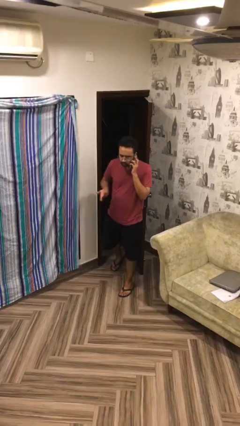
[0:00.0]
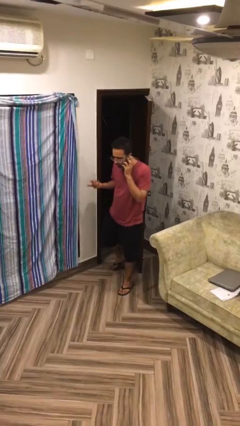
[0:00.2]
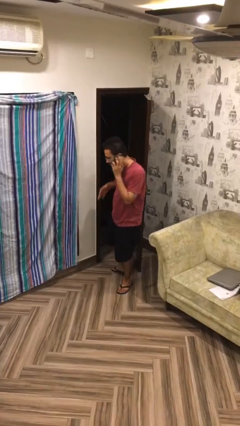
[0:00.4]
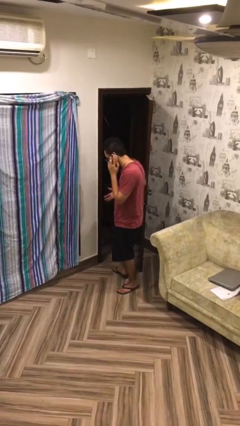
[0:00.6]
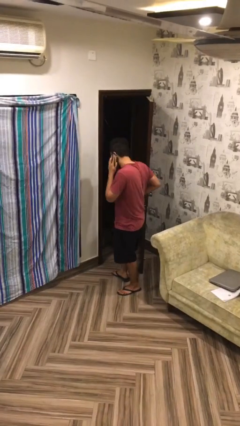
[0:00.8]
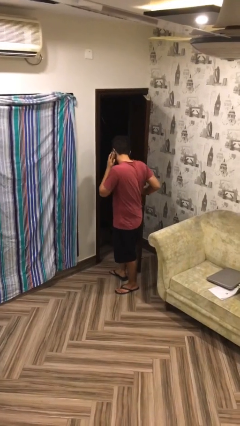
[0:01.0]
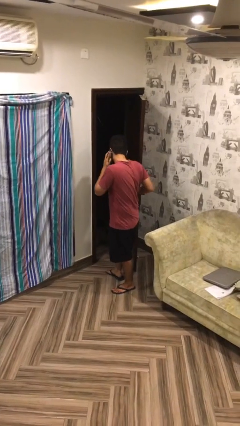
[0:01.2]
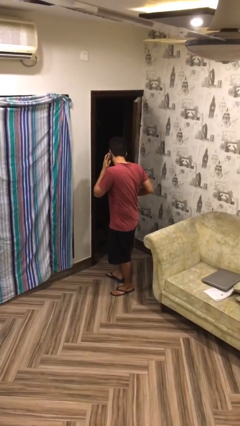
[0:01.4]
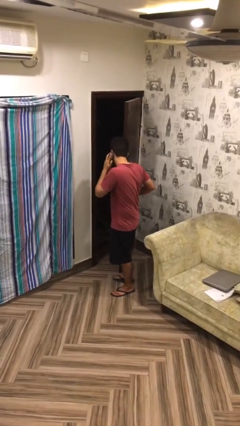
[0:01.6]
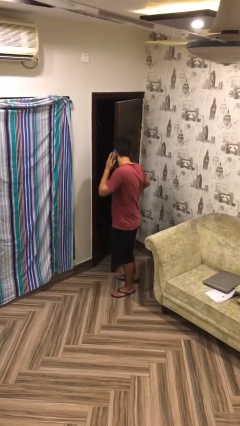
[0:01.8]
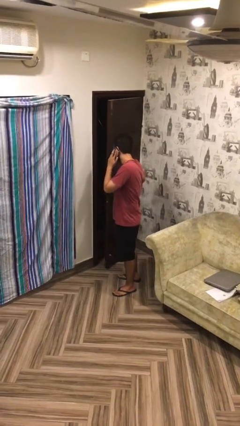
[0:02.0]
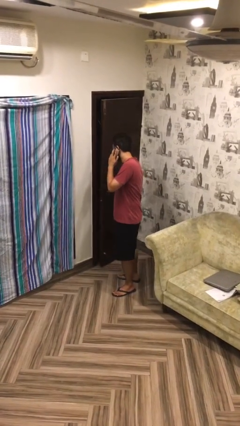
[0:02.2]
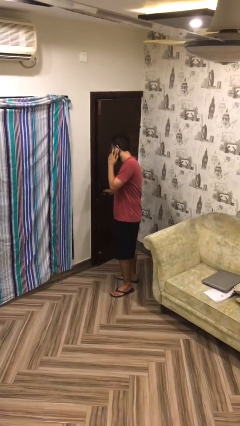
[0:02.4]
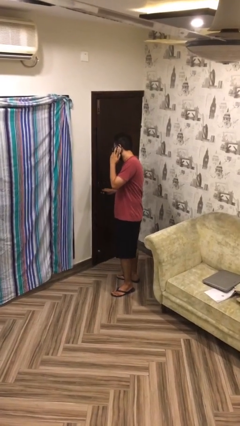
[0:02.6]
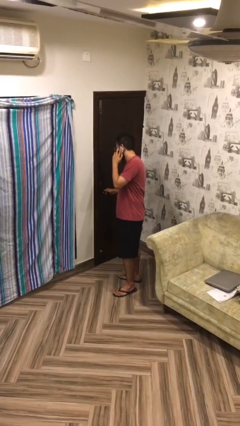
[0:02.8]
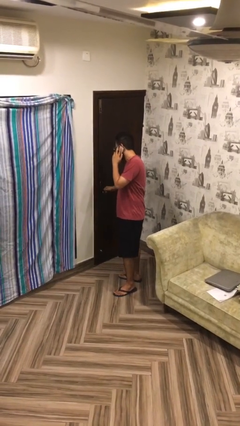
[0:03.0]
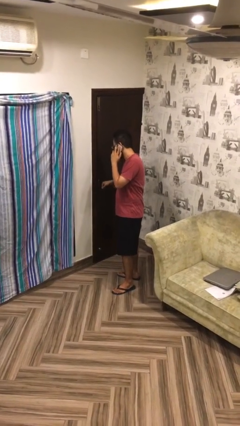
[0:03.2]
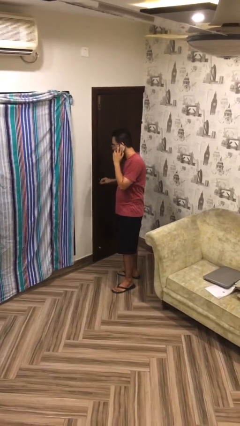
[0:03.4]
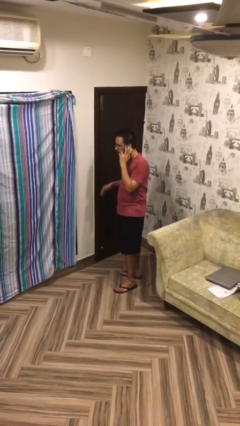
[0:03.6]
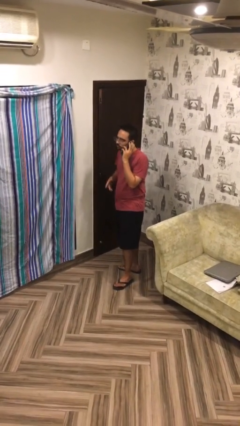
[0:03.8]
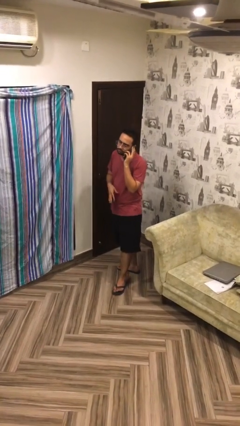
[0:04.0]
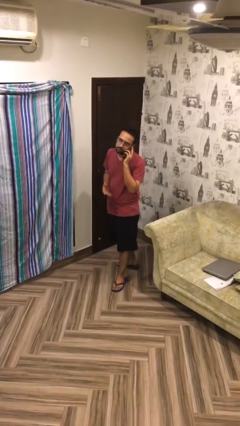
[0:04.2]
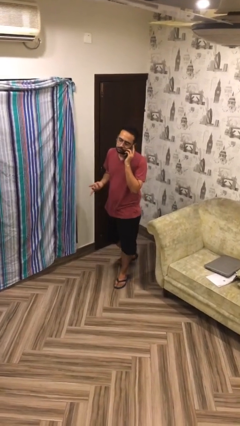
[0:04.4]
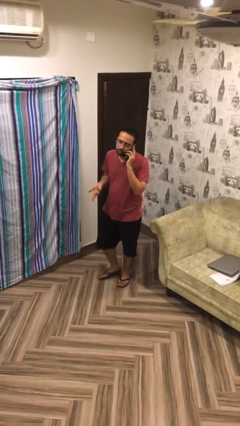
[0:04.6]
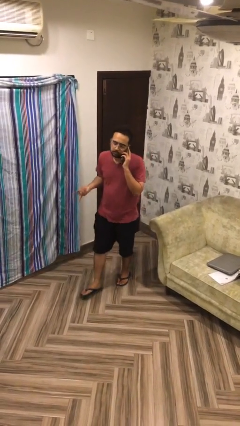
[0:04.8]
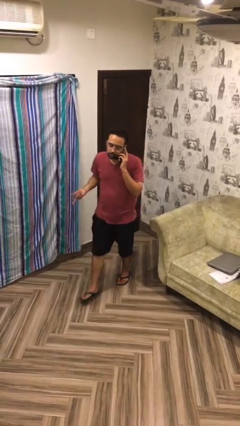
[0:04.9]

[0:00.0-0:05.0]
person closes facility door

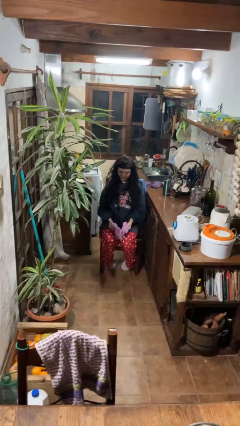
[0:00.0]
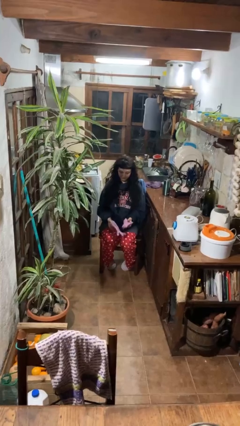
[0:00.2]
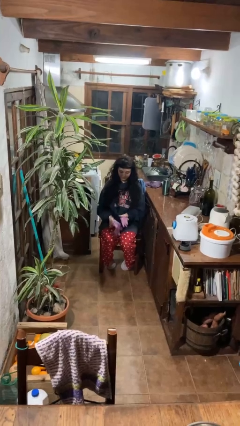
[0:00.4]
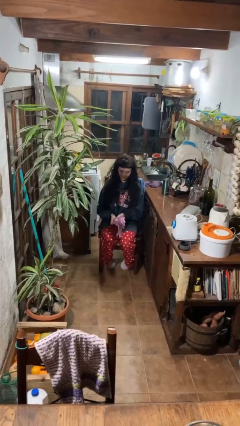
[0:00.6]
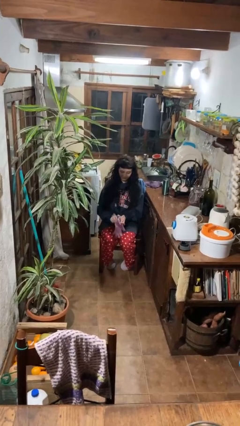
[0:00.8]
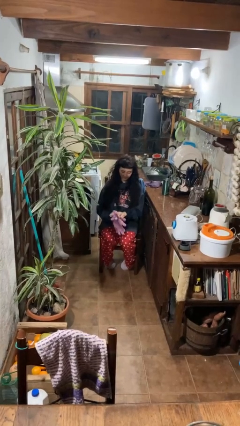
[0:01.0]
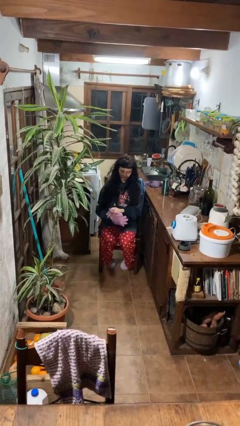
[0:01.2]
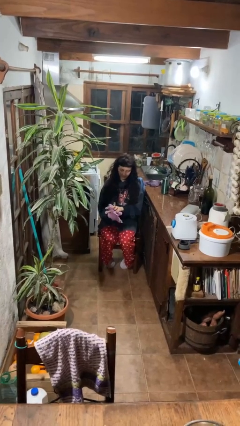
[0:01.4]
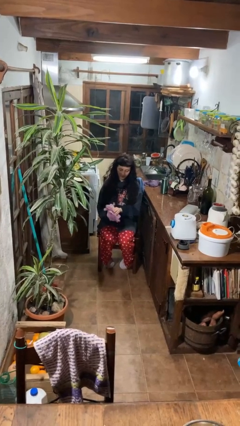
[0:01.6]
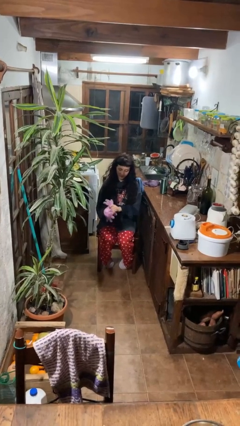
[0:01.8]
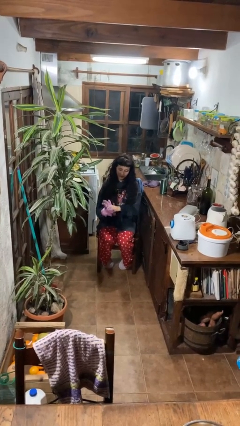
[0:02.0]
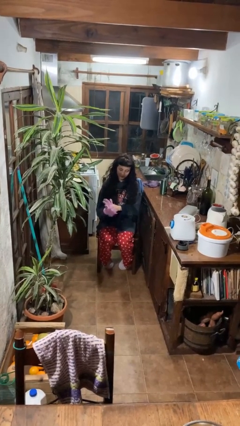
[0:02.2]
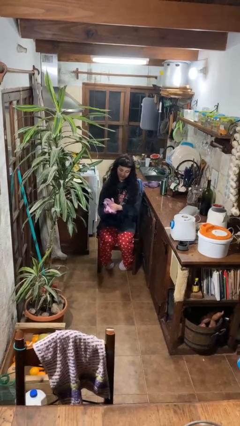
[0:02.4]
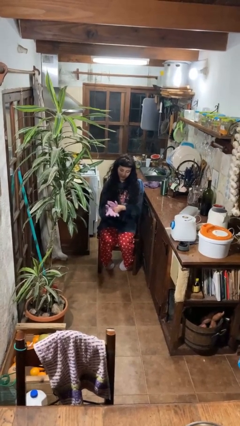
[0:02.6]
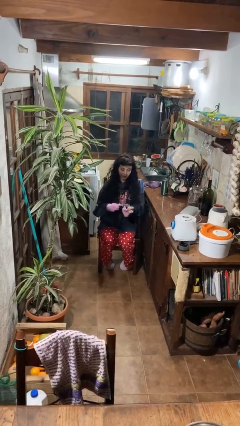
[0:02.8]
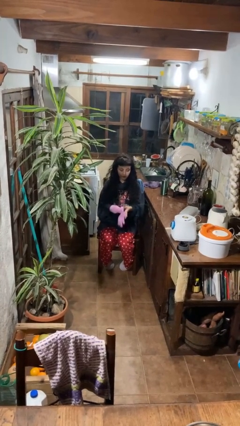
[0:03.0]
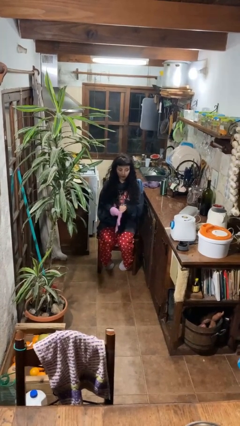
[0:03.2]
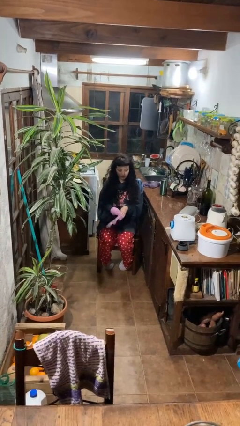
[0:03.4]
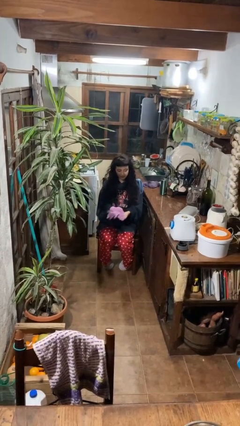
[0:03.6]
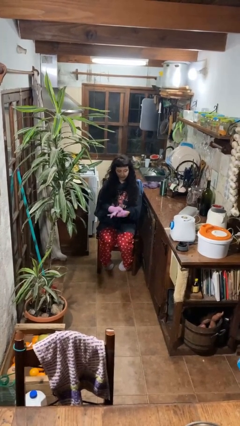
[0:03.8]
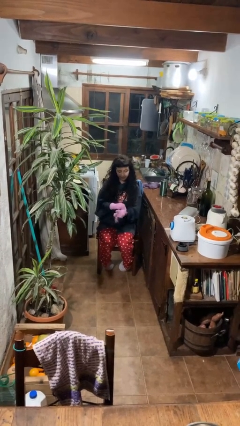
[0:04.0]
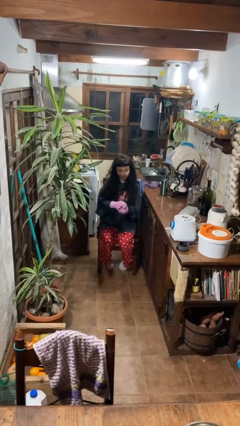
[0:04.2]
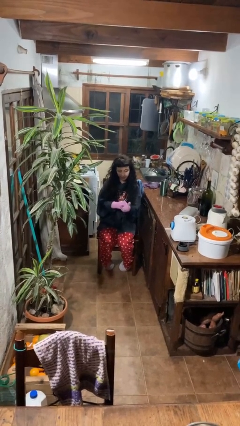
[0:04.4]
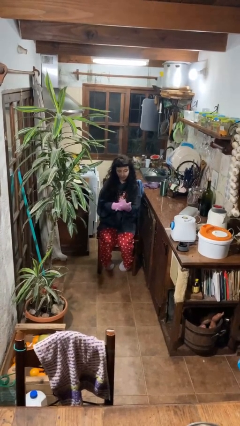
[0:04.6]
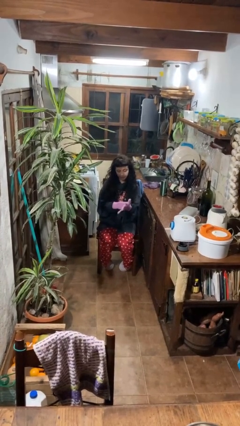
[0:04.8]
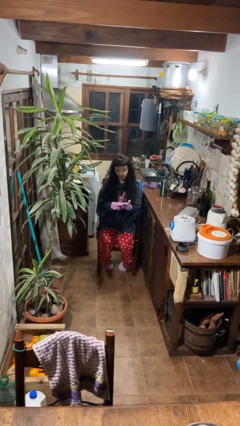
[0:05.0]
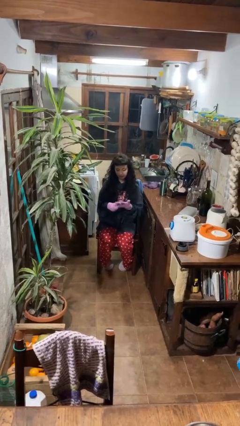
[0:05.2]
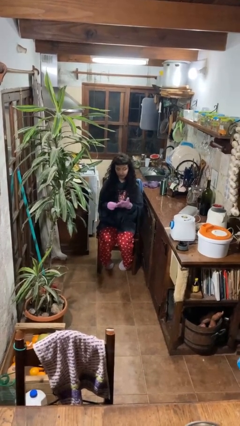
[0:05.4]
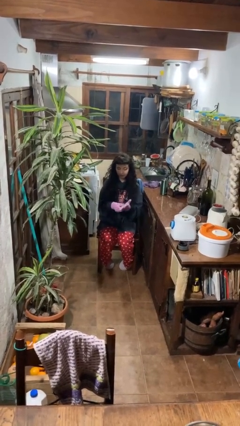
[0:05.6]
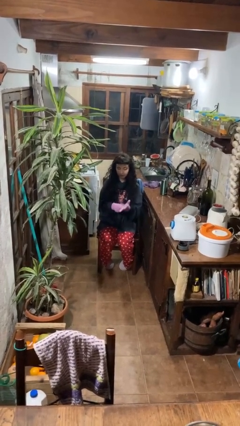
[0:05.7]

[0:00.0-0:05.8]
person puts on gloves

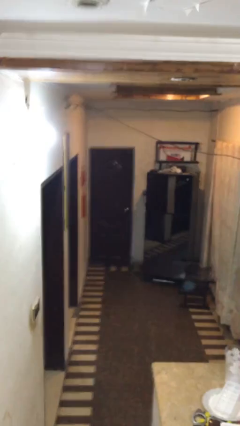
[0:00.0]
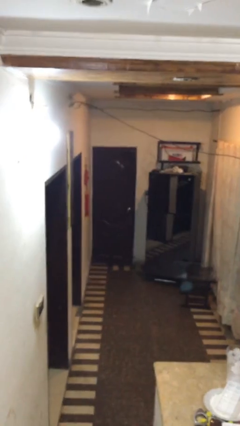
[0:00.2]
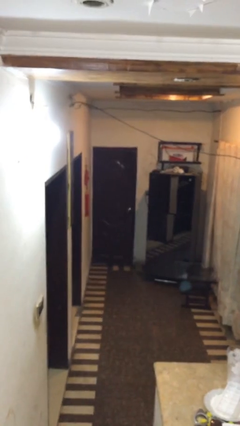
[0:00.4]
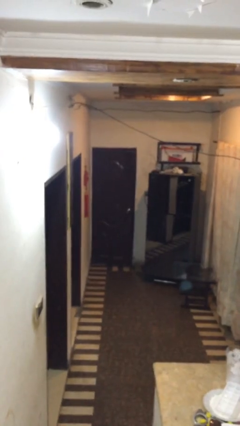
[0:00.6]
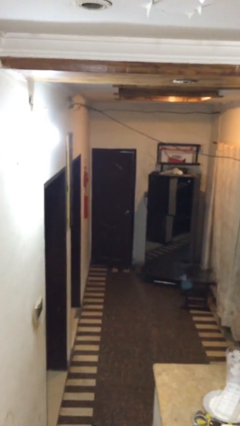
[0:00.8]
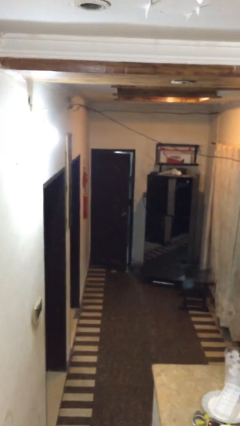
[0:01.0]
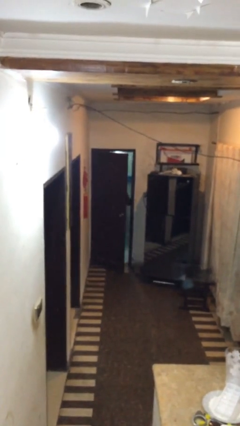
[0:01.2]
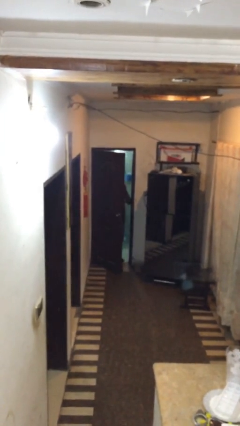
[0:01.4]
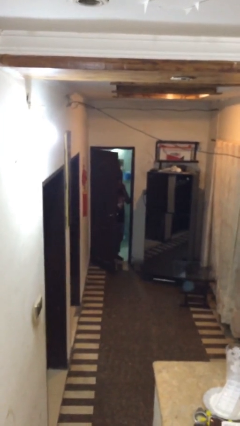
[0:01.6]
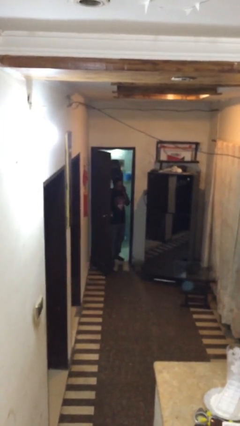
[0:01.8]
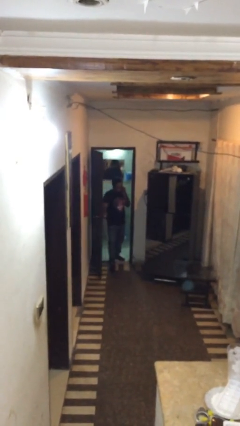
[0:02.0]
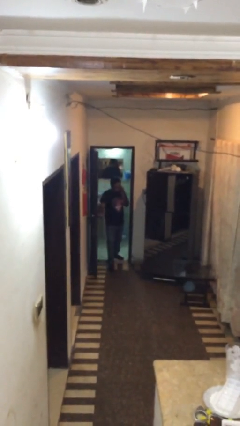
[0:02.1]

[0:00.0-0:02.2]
person opens facility door

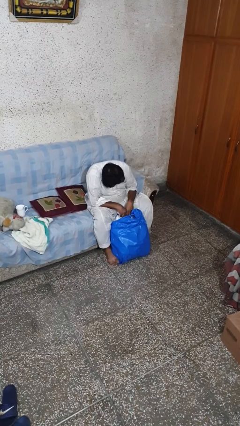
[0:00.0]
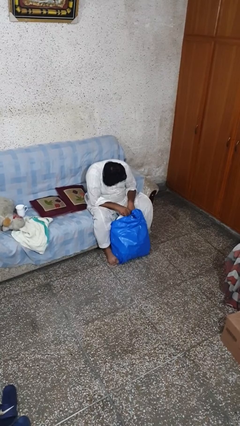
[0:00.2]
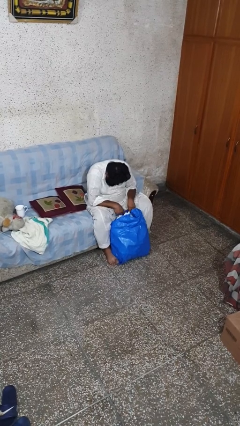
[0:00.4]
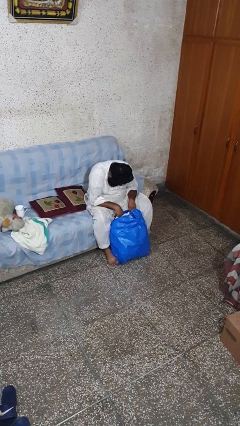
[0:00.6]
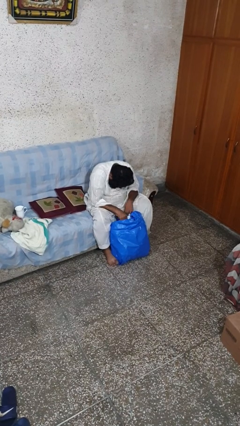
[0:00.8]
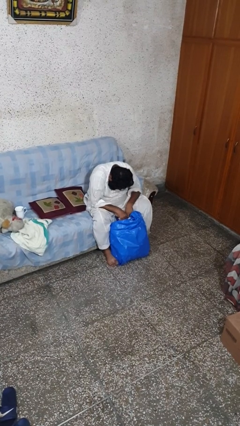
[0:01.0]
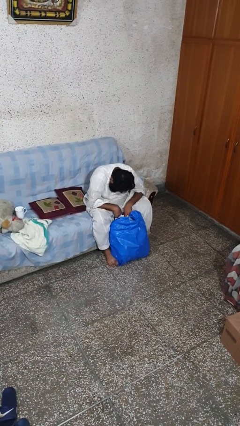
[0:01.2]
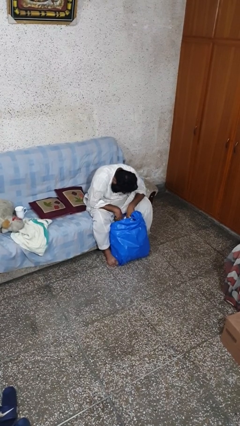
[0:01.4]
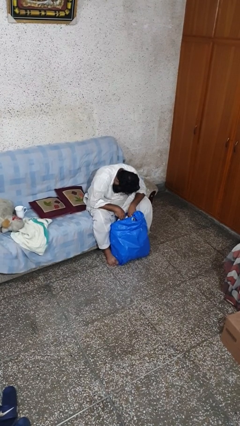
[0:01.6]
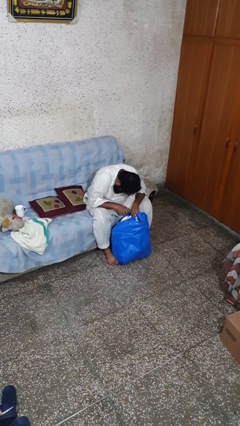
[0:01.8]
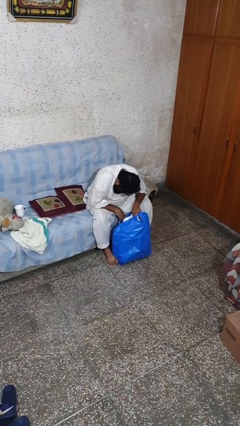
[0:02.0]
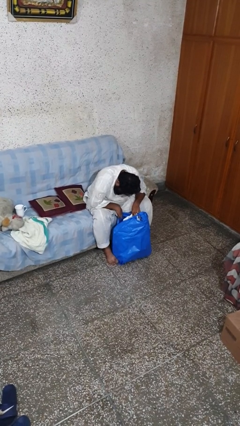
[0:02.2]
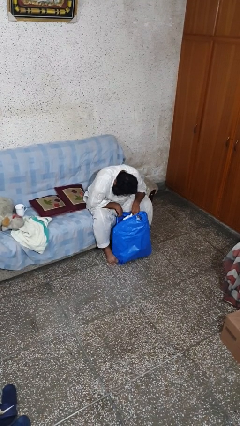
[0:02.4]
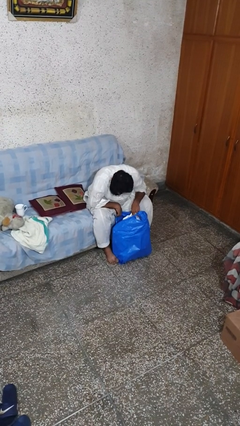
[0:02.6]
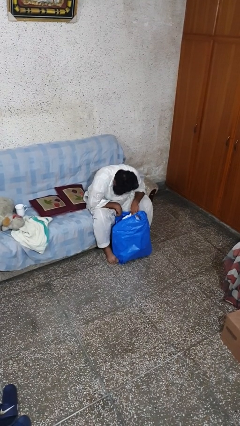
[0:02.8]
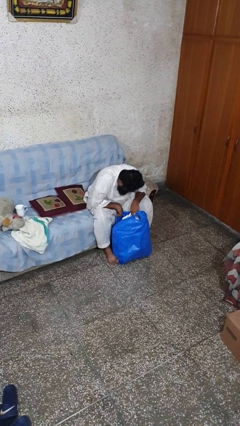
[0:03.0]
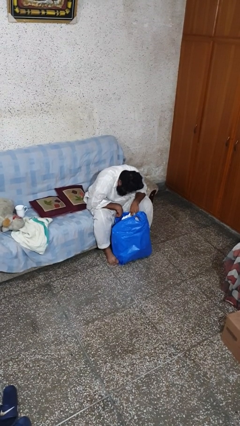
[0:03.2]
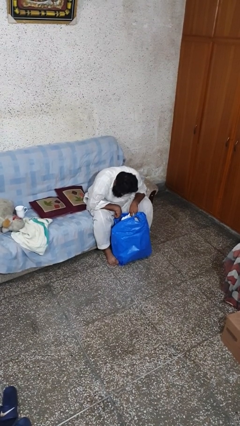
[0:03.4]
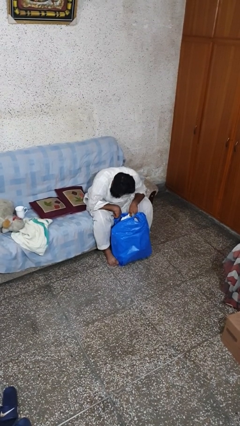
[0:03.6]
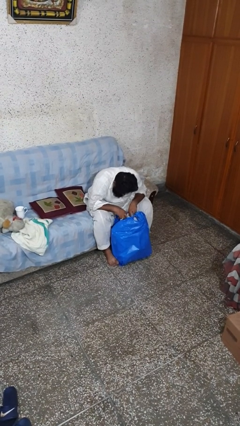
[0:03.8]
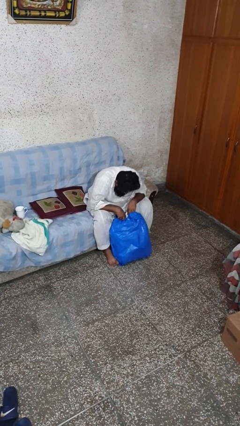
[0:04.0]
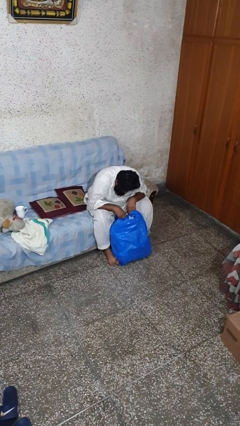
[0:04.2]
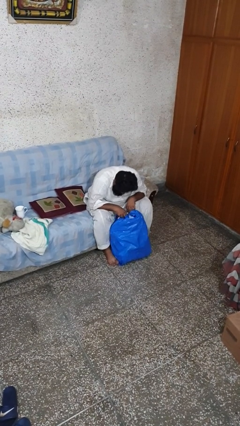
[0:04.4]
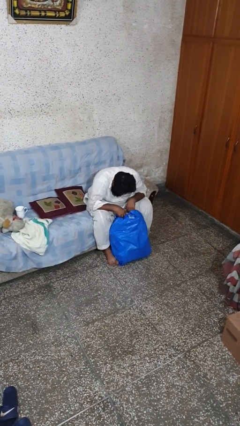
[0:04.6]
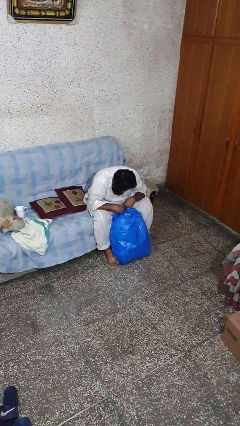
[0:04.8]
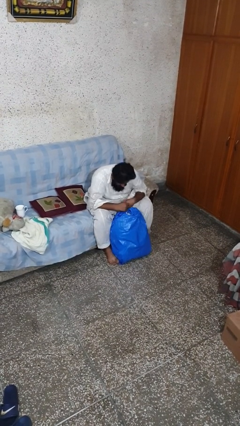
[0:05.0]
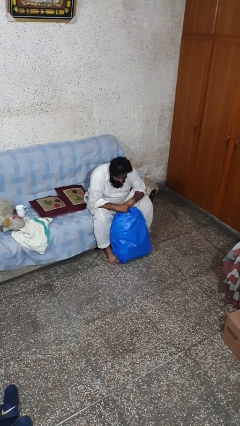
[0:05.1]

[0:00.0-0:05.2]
person searches in bag
